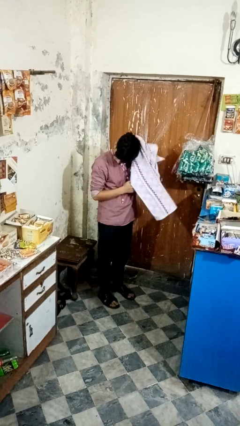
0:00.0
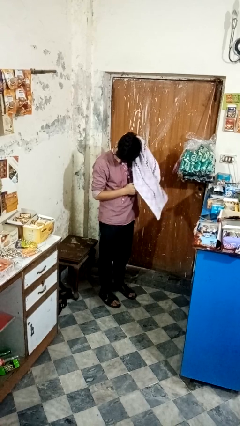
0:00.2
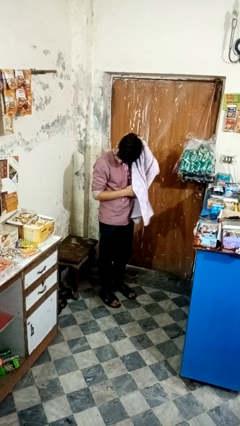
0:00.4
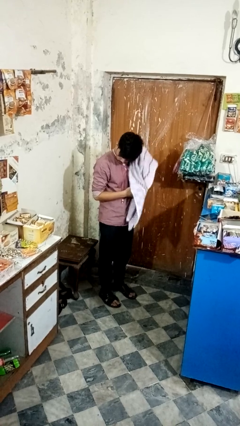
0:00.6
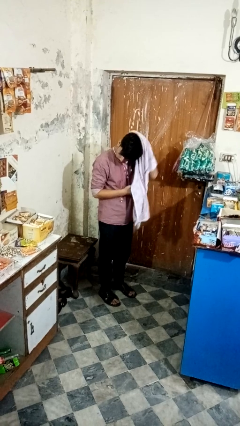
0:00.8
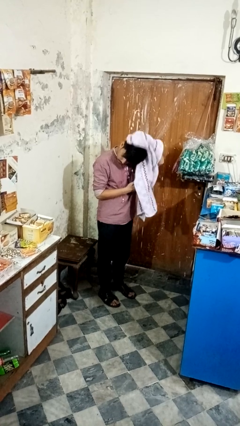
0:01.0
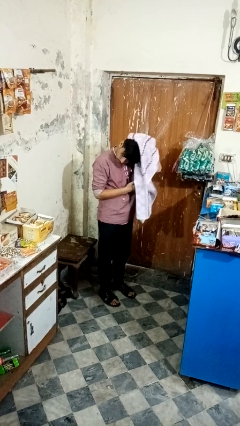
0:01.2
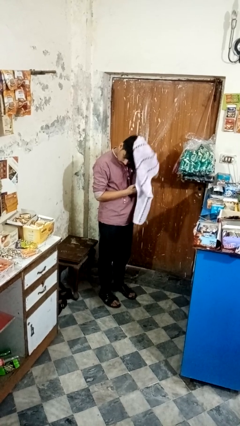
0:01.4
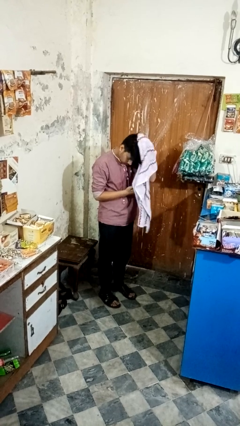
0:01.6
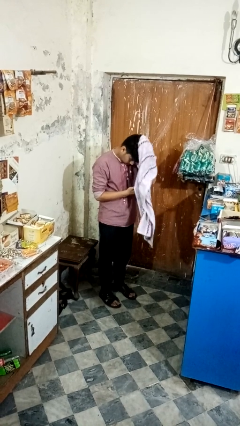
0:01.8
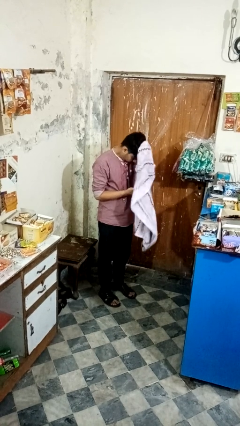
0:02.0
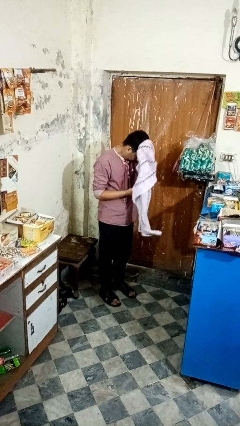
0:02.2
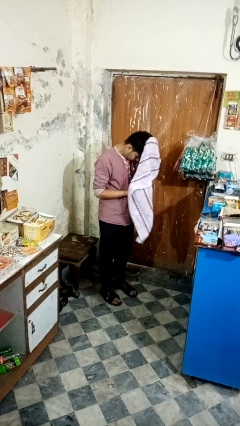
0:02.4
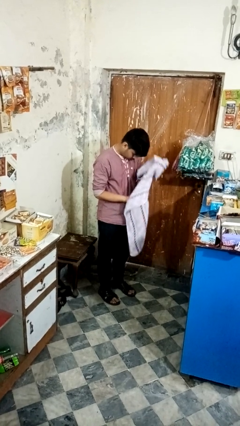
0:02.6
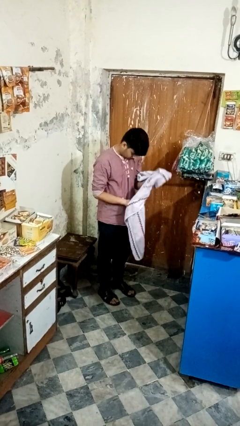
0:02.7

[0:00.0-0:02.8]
person dries hair with towel

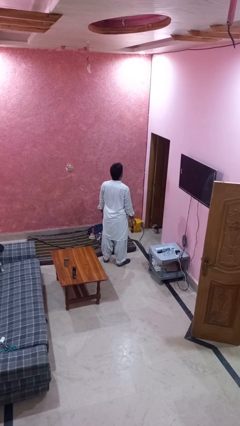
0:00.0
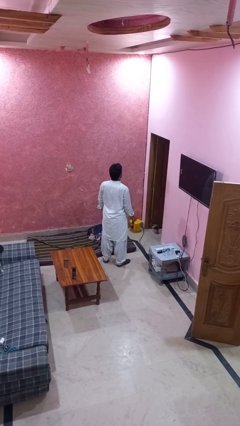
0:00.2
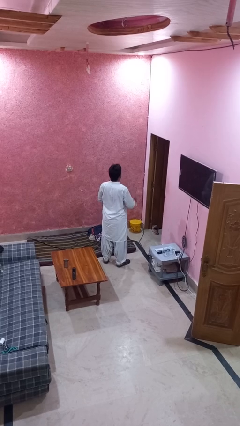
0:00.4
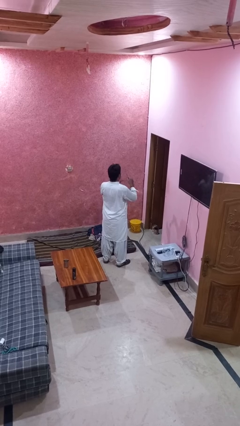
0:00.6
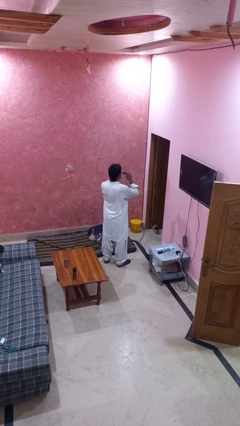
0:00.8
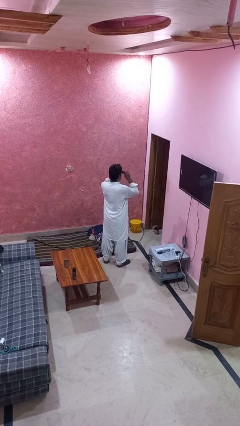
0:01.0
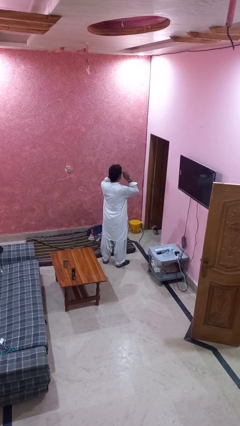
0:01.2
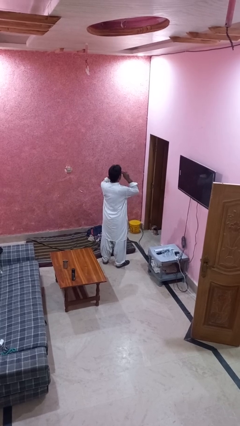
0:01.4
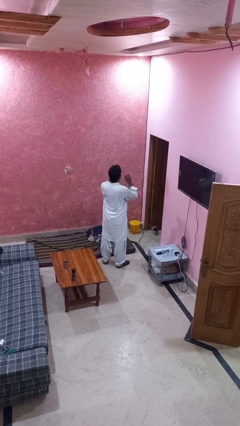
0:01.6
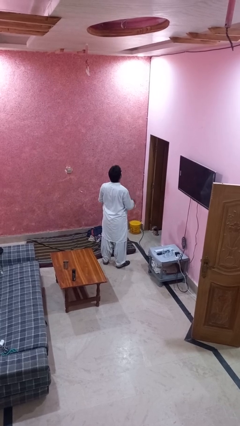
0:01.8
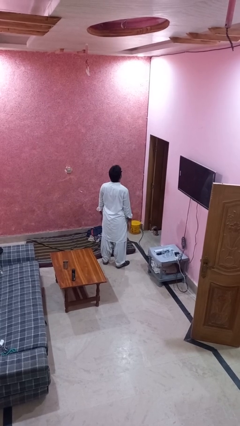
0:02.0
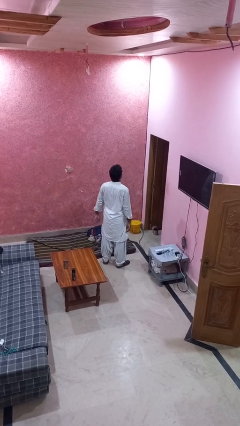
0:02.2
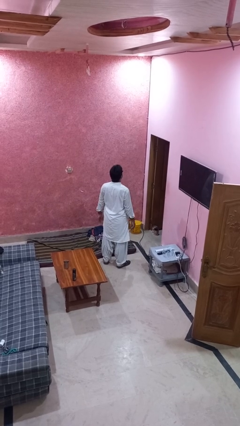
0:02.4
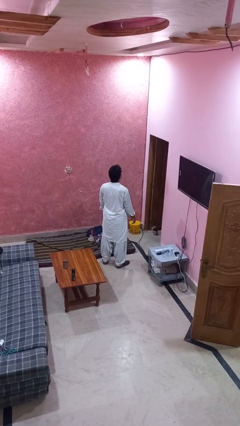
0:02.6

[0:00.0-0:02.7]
person puts on sunglasses

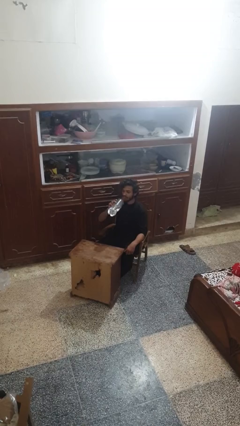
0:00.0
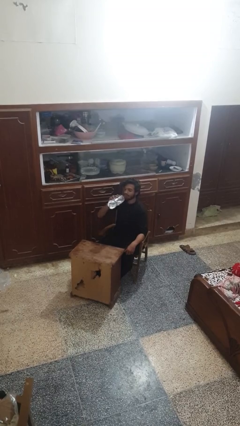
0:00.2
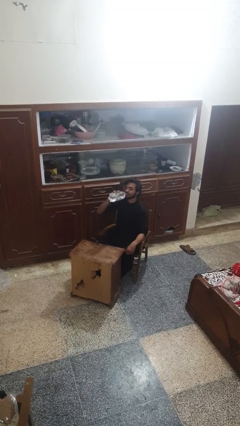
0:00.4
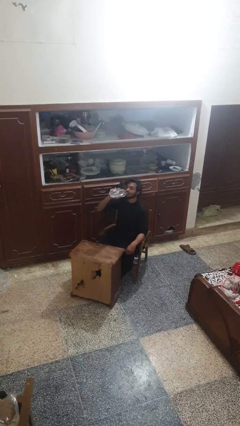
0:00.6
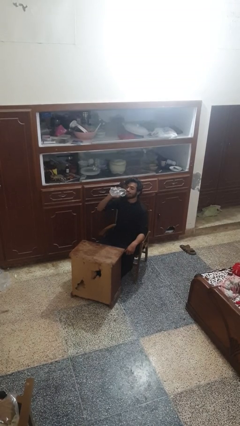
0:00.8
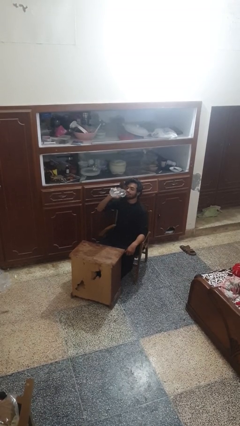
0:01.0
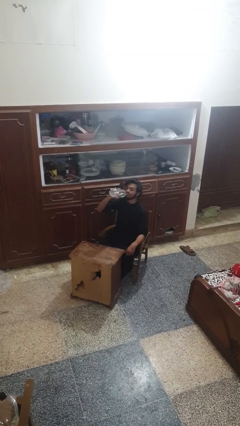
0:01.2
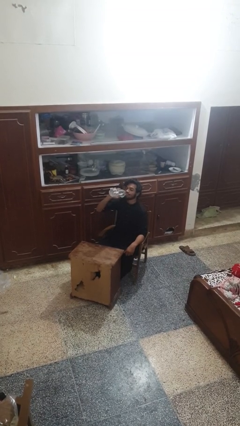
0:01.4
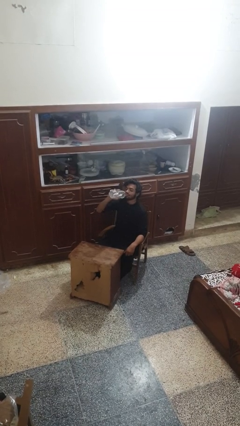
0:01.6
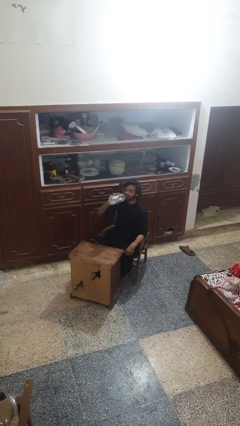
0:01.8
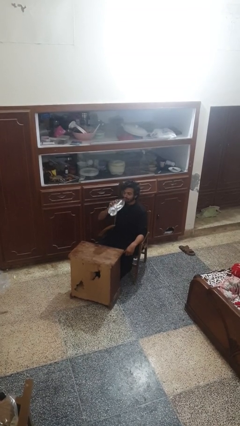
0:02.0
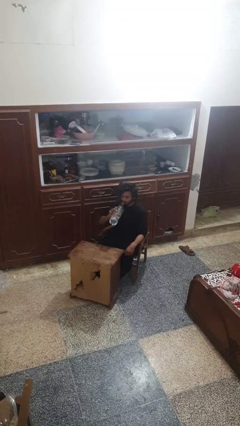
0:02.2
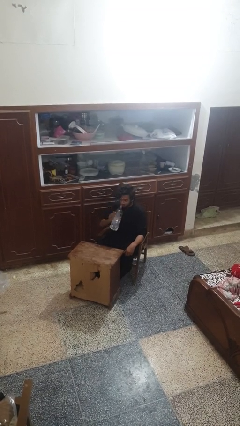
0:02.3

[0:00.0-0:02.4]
person drinks from bottle

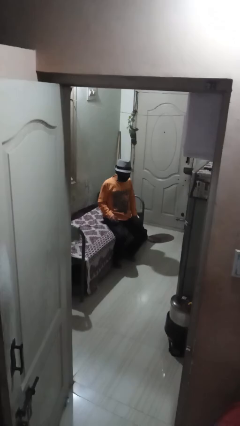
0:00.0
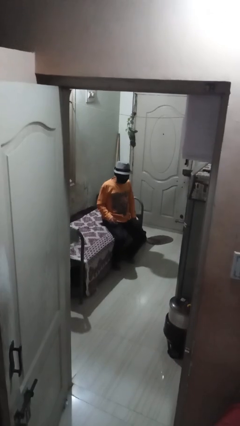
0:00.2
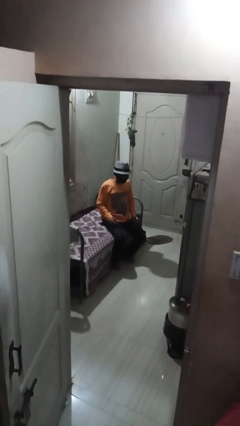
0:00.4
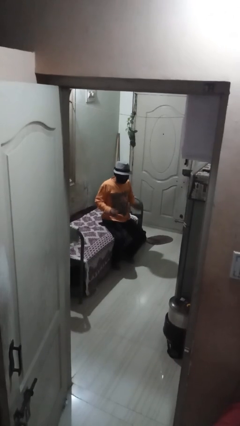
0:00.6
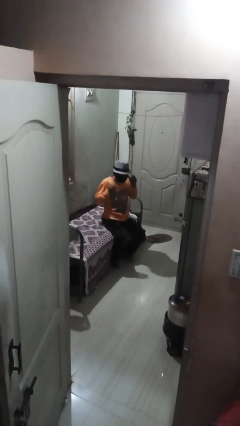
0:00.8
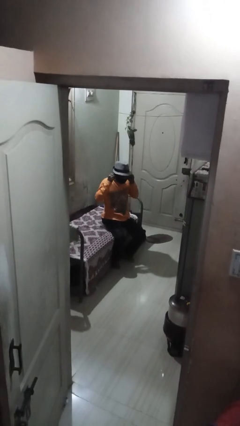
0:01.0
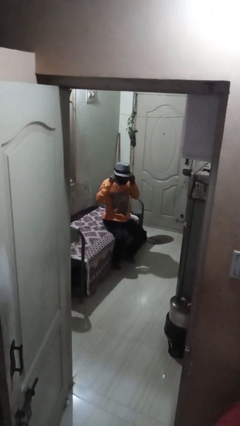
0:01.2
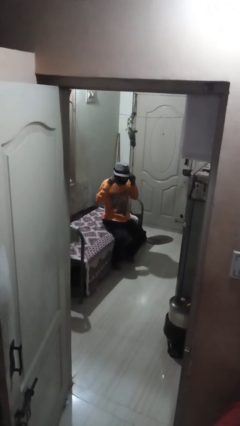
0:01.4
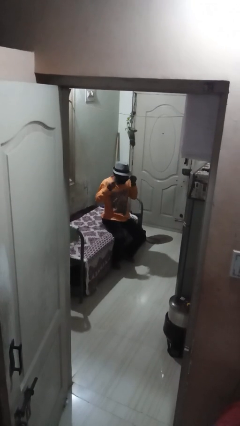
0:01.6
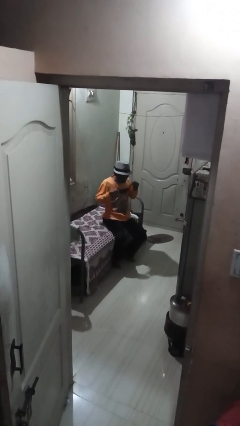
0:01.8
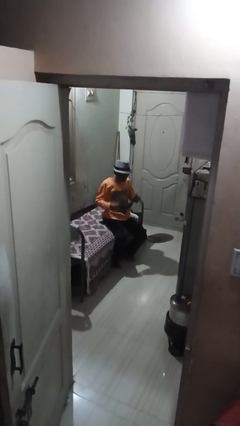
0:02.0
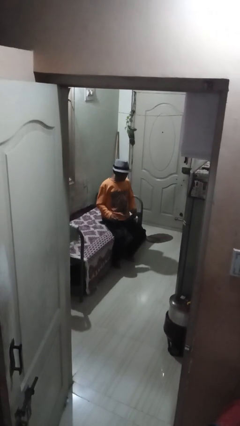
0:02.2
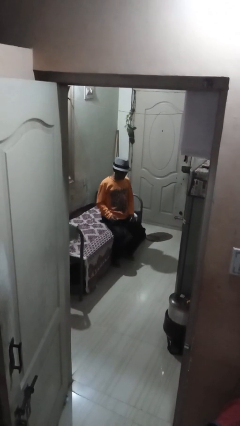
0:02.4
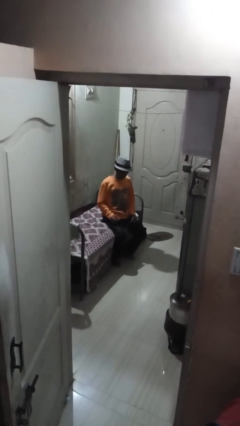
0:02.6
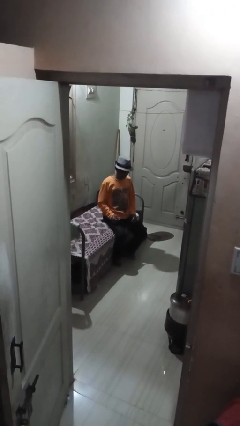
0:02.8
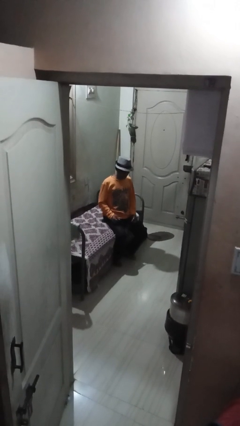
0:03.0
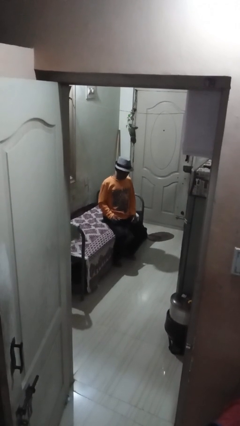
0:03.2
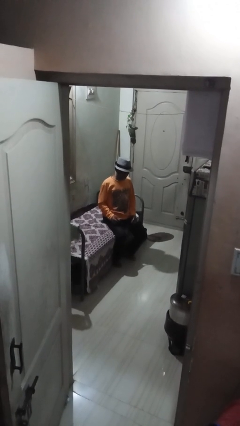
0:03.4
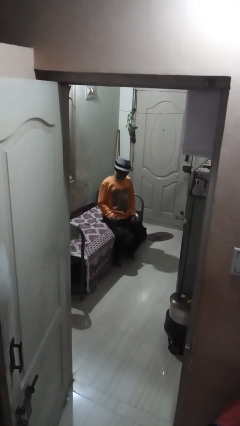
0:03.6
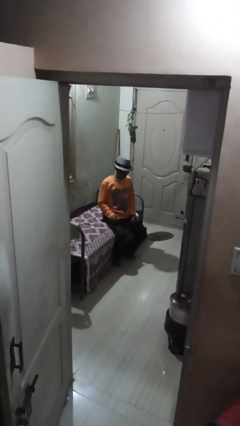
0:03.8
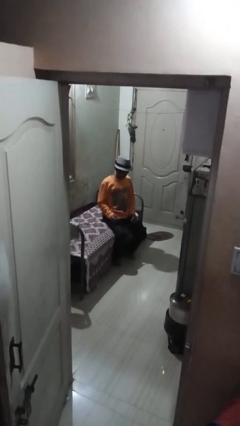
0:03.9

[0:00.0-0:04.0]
person takes off facemask

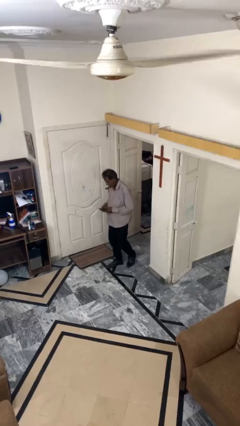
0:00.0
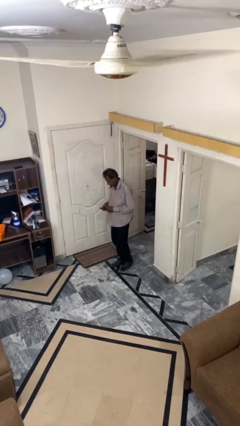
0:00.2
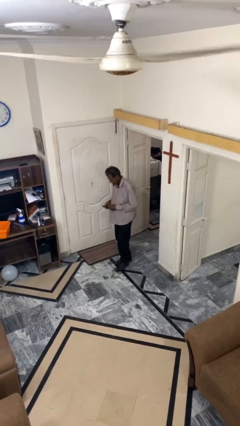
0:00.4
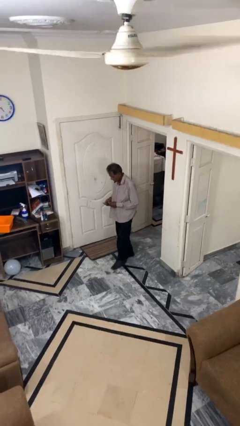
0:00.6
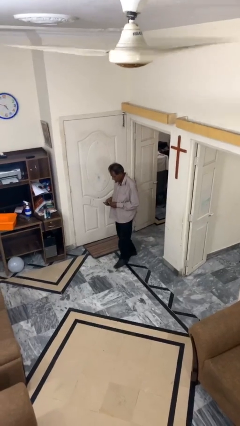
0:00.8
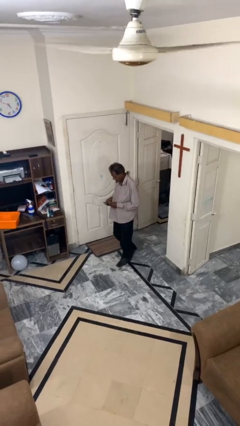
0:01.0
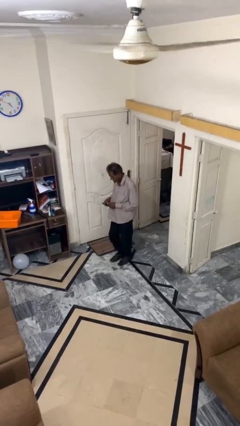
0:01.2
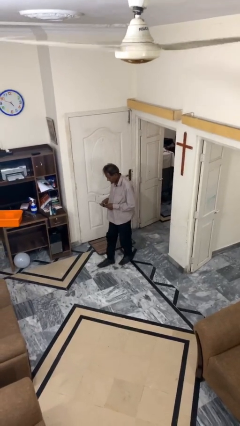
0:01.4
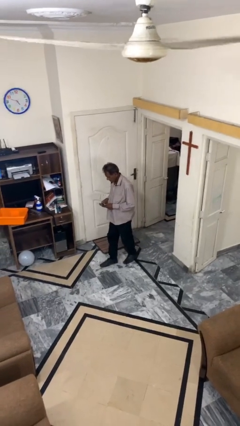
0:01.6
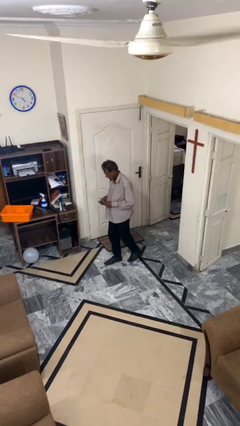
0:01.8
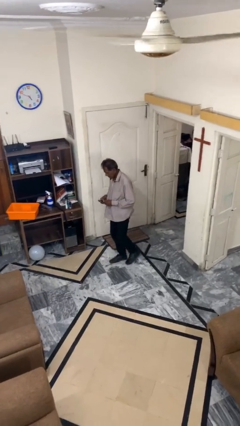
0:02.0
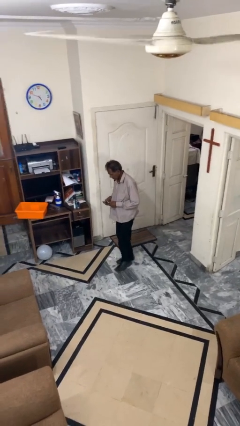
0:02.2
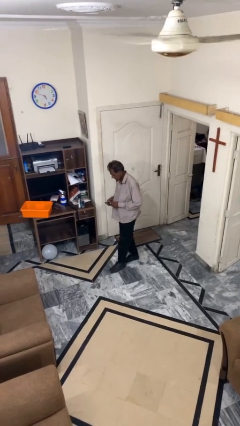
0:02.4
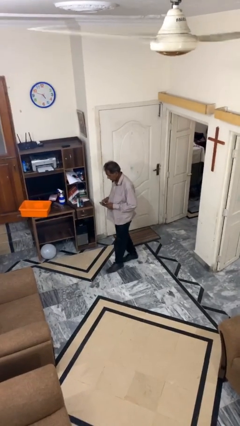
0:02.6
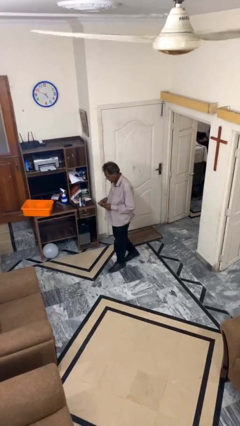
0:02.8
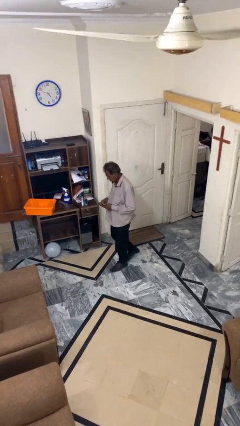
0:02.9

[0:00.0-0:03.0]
person texts on phone

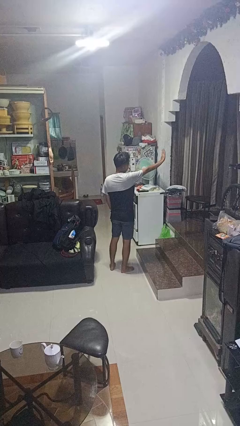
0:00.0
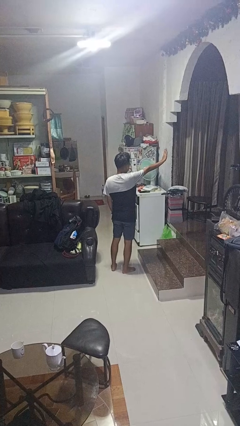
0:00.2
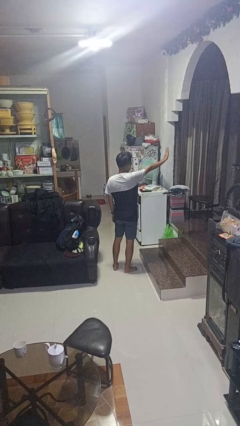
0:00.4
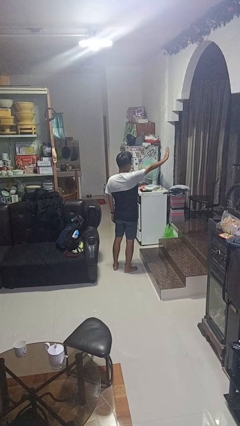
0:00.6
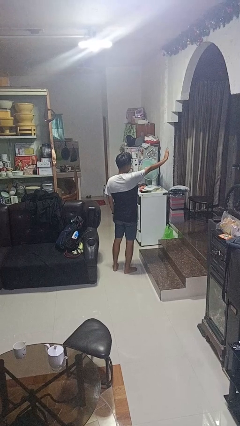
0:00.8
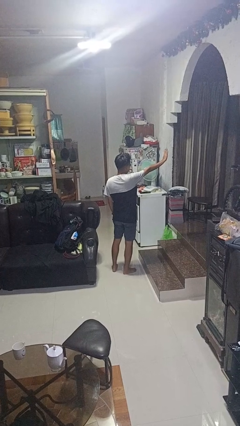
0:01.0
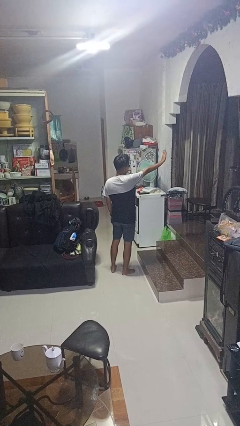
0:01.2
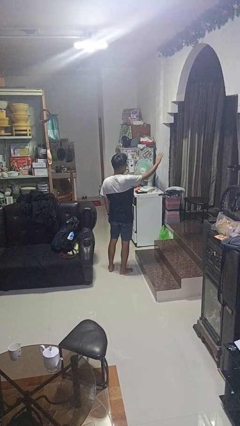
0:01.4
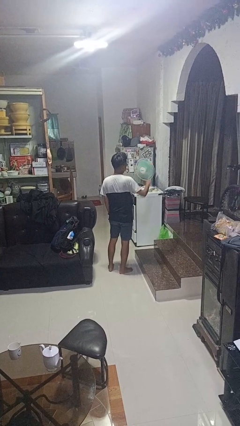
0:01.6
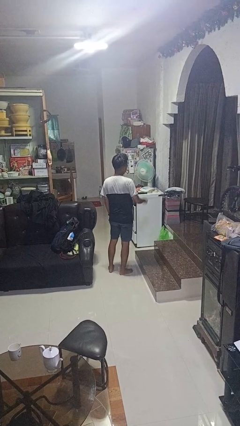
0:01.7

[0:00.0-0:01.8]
person gestures stop

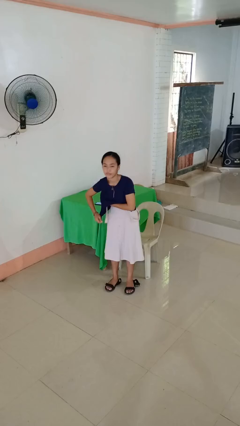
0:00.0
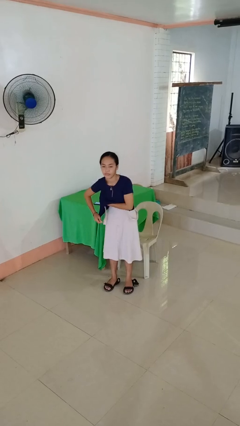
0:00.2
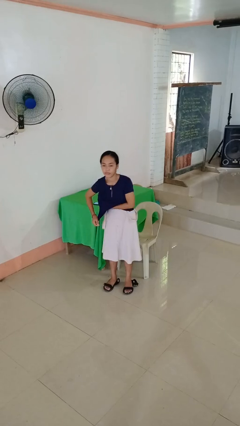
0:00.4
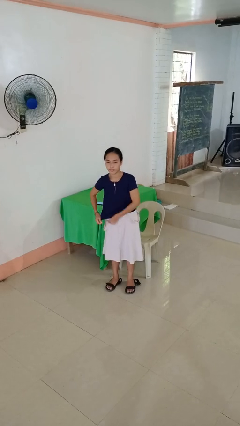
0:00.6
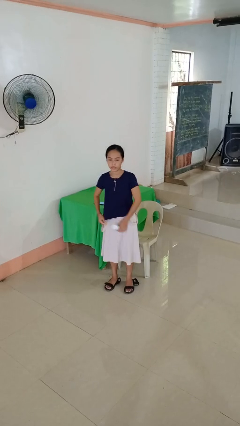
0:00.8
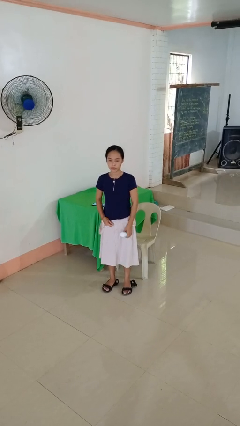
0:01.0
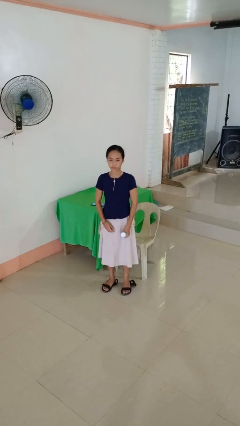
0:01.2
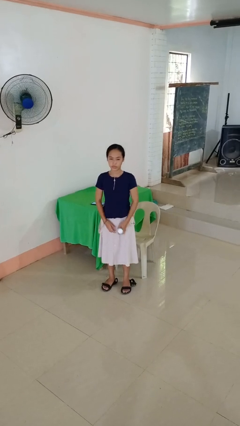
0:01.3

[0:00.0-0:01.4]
person applies deodorant
